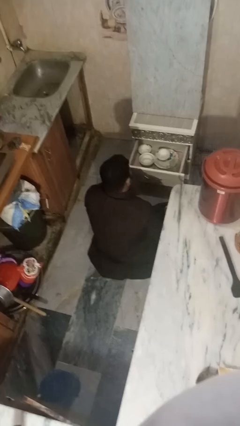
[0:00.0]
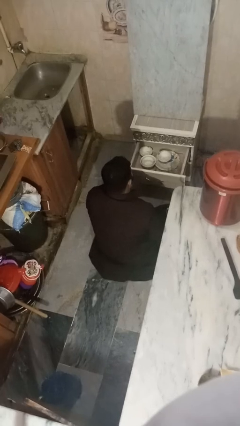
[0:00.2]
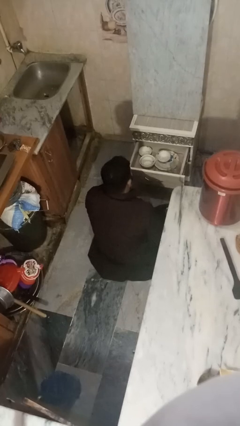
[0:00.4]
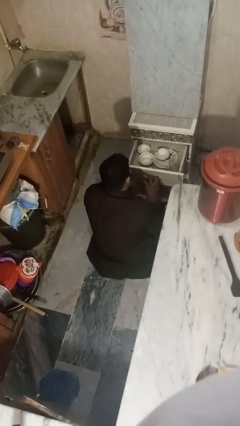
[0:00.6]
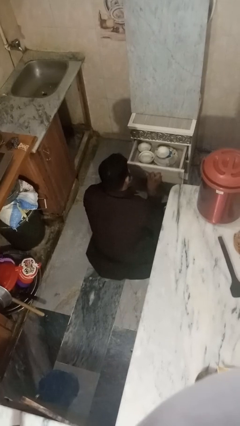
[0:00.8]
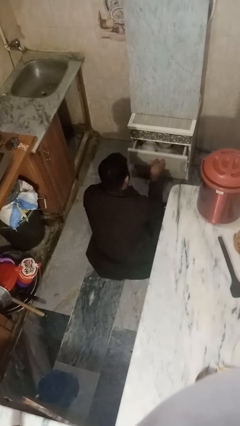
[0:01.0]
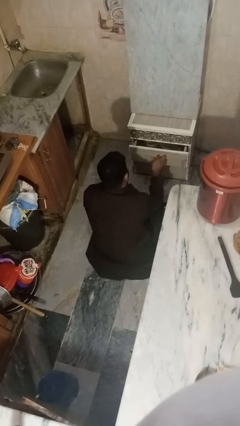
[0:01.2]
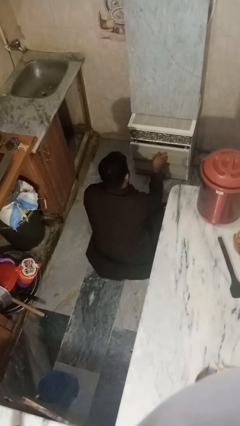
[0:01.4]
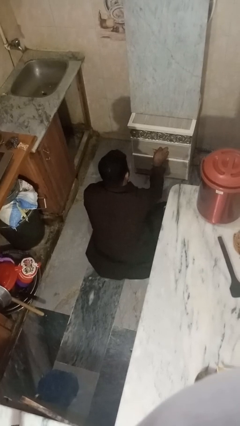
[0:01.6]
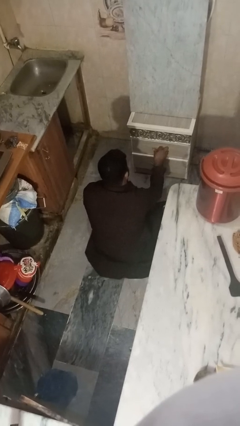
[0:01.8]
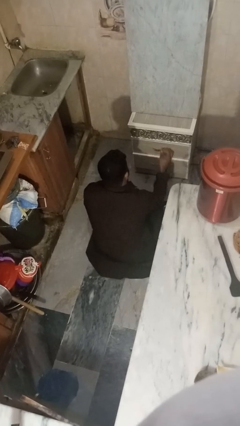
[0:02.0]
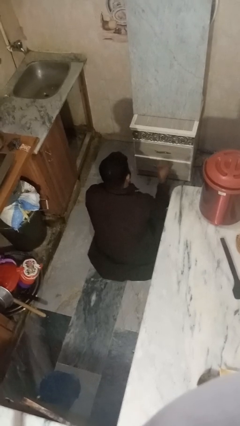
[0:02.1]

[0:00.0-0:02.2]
person closes kitchen drawer

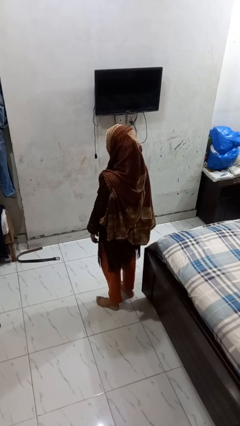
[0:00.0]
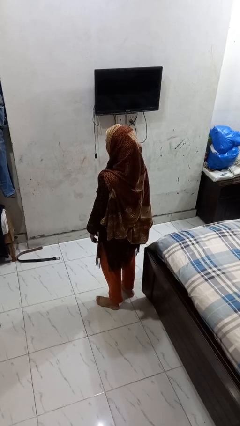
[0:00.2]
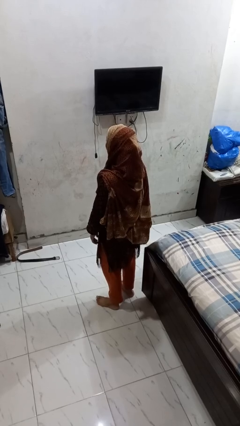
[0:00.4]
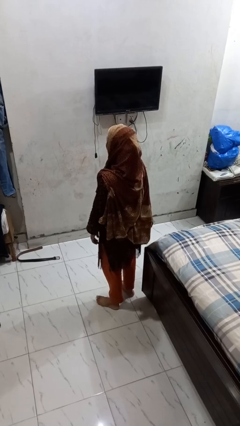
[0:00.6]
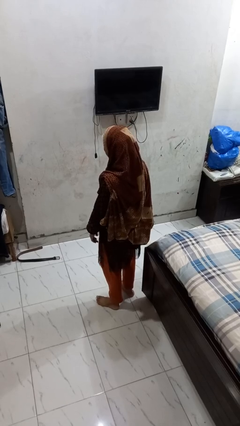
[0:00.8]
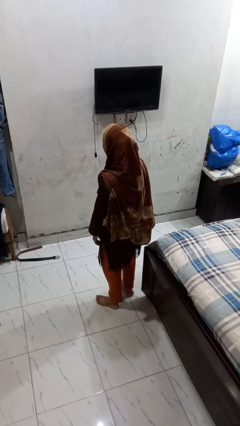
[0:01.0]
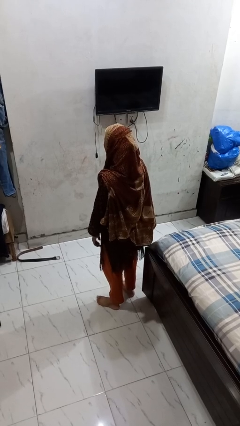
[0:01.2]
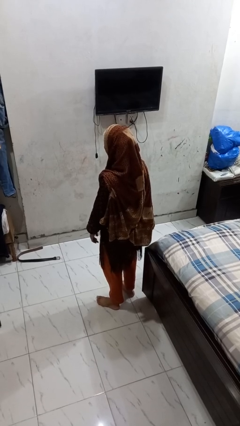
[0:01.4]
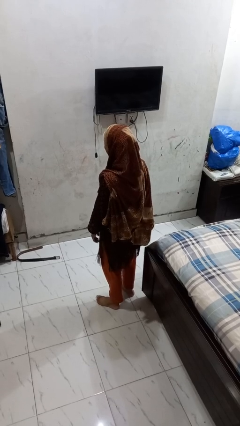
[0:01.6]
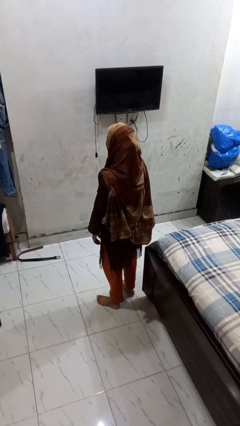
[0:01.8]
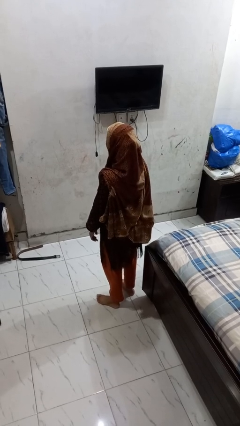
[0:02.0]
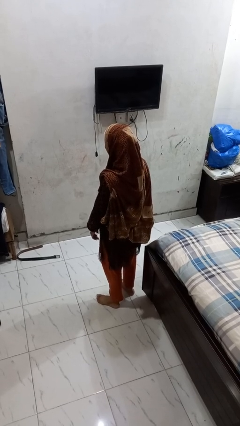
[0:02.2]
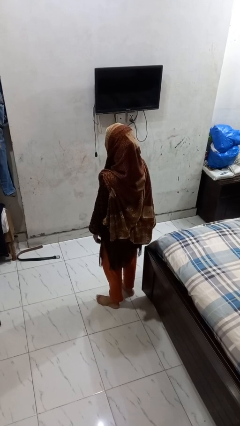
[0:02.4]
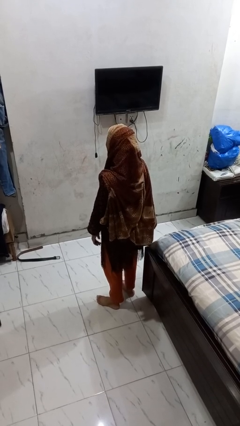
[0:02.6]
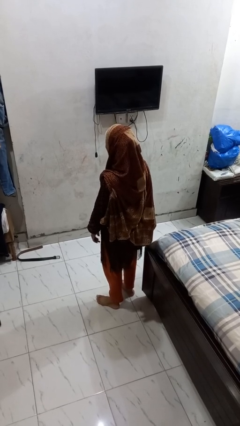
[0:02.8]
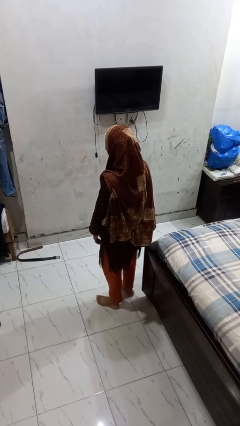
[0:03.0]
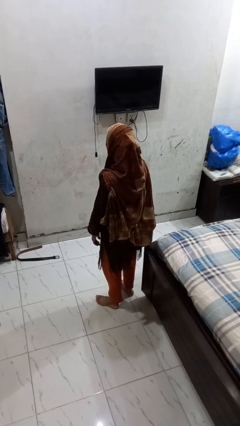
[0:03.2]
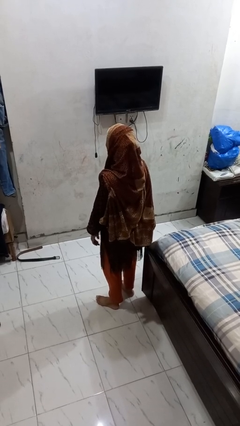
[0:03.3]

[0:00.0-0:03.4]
person nods head

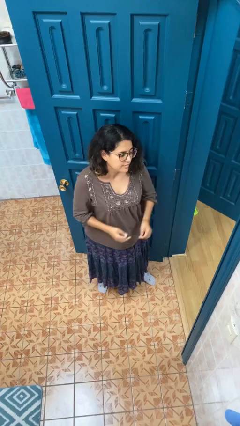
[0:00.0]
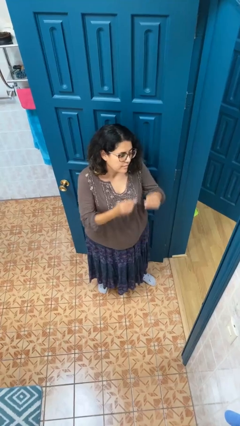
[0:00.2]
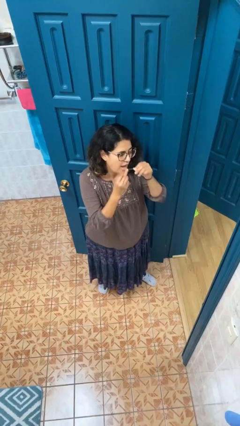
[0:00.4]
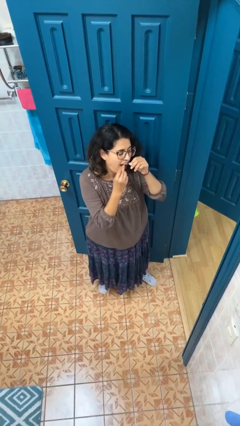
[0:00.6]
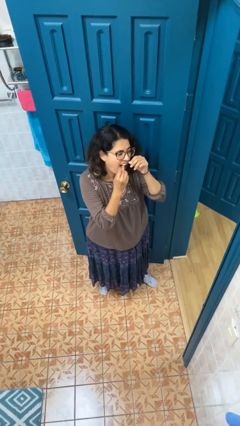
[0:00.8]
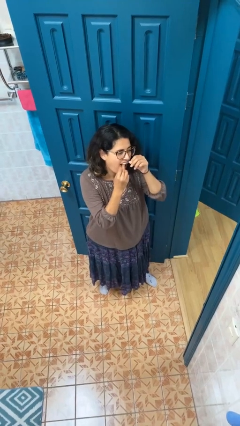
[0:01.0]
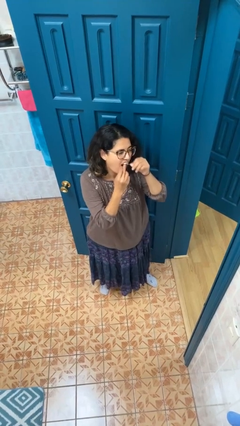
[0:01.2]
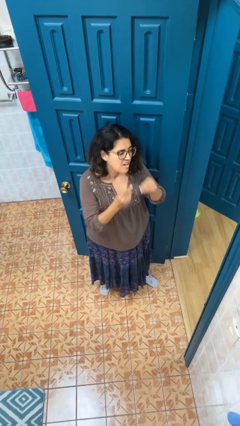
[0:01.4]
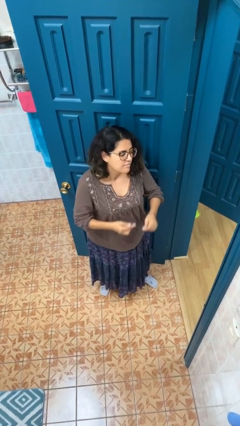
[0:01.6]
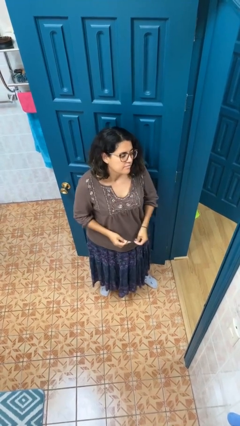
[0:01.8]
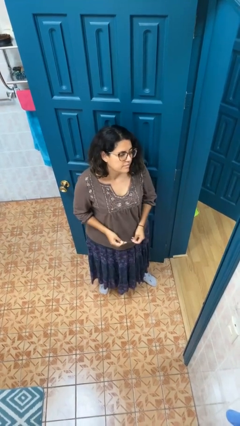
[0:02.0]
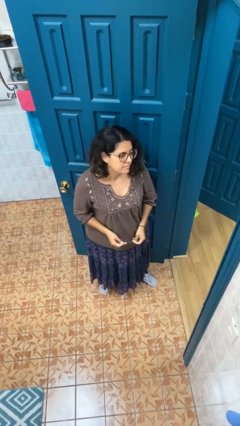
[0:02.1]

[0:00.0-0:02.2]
person flosses

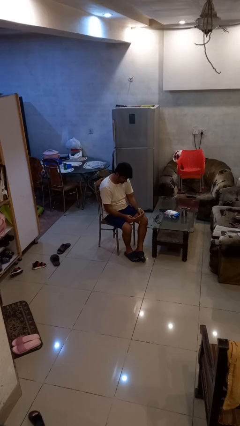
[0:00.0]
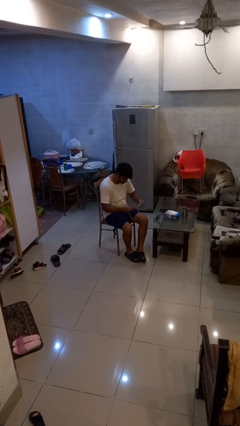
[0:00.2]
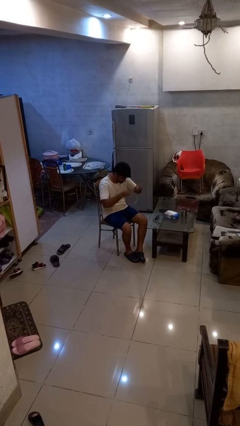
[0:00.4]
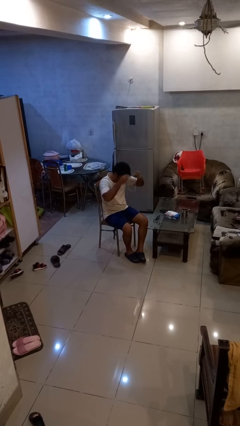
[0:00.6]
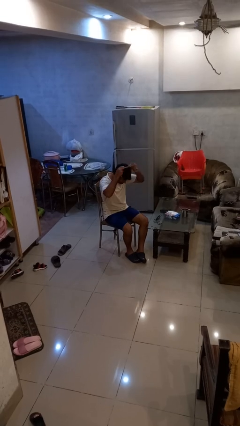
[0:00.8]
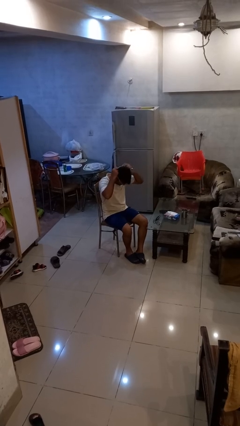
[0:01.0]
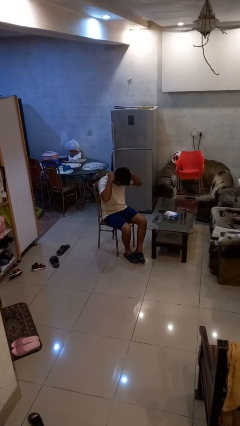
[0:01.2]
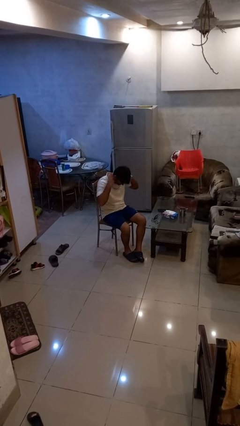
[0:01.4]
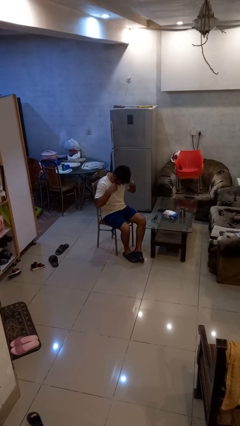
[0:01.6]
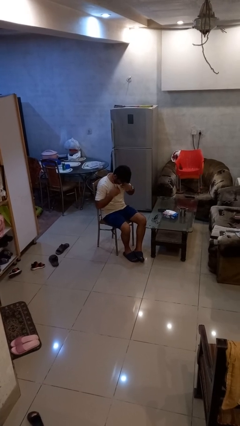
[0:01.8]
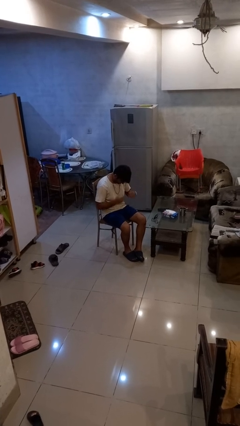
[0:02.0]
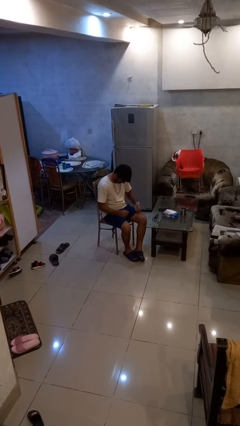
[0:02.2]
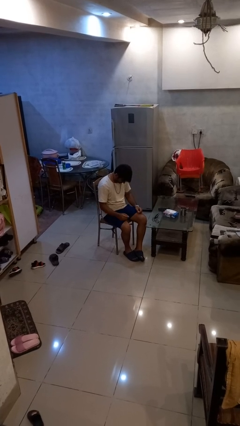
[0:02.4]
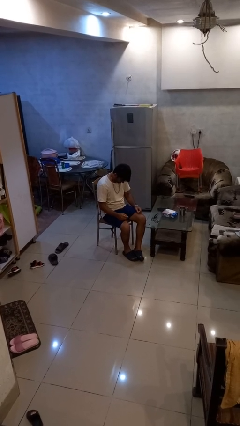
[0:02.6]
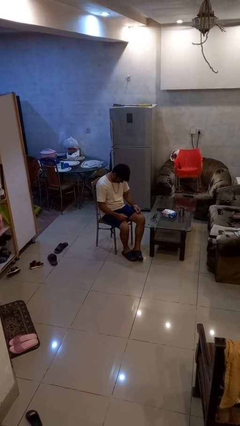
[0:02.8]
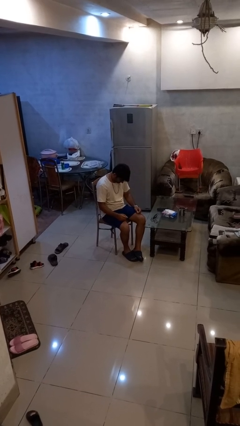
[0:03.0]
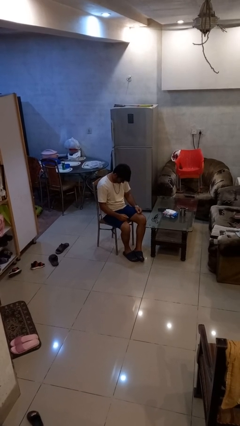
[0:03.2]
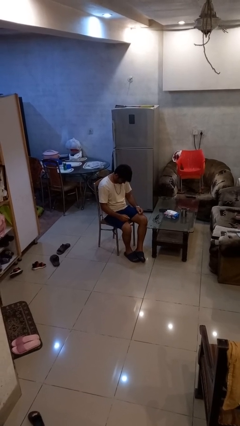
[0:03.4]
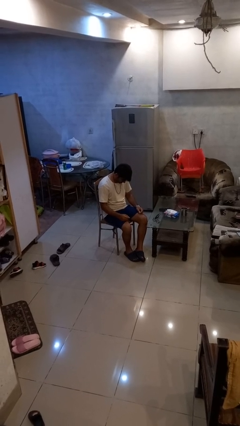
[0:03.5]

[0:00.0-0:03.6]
person puts on necklace

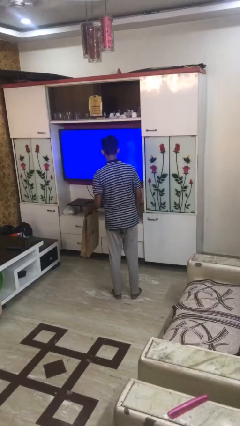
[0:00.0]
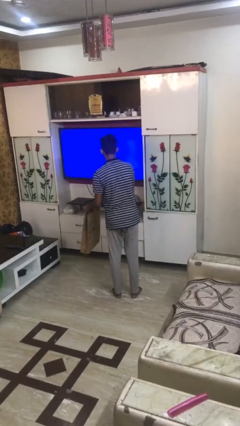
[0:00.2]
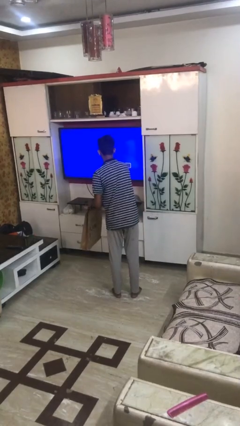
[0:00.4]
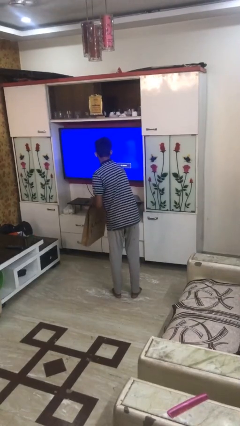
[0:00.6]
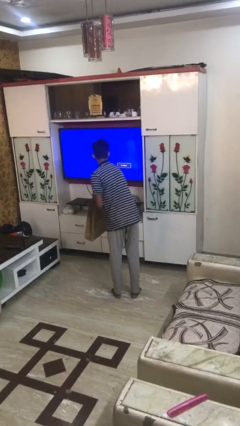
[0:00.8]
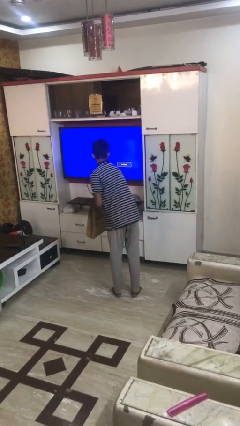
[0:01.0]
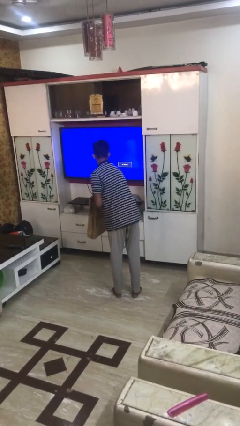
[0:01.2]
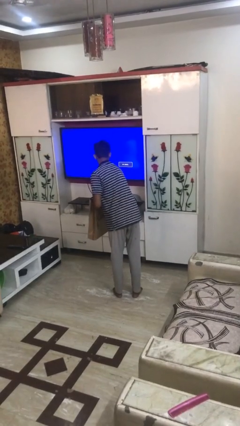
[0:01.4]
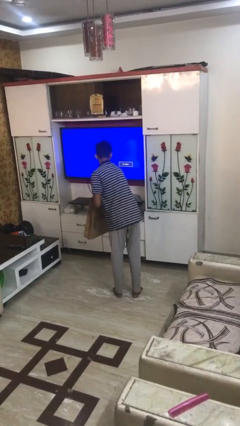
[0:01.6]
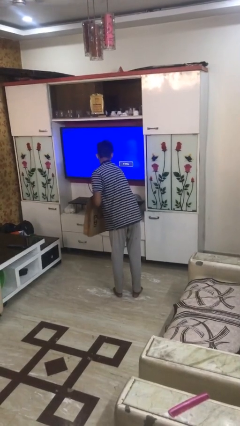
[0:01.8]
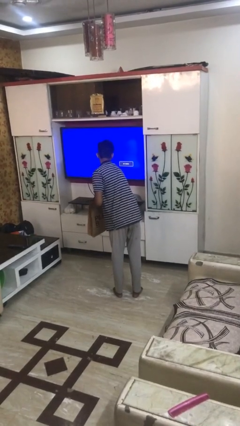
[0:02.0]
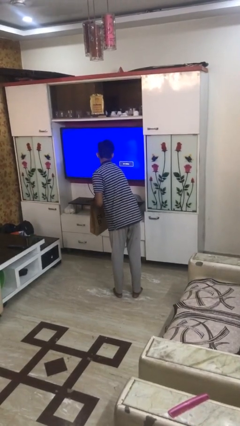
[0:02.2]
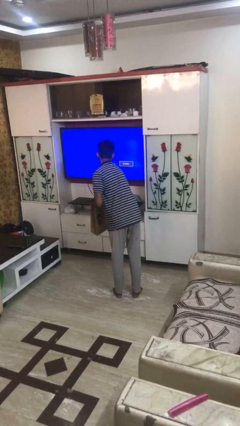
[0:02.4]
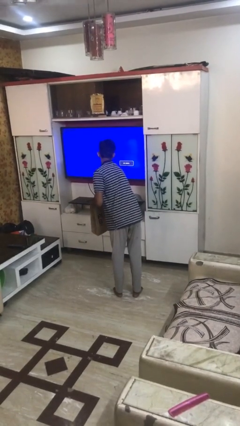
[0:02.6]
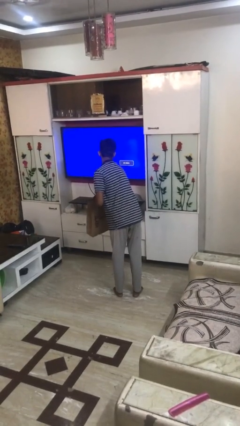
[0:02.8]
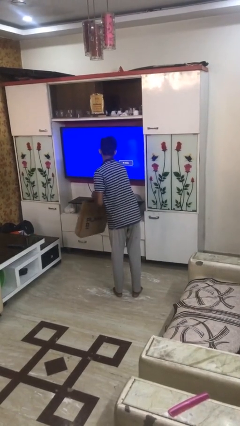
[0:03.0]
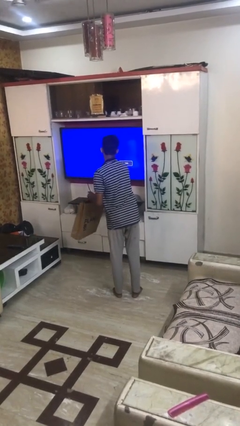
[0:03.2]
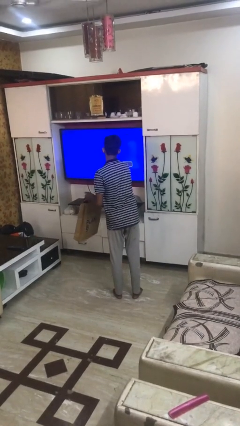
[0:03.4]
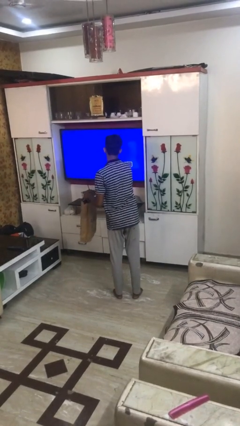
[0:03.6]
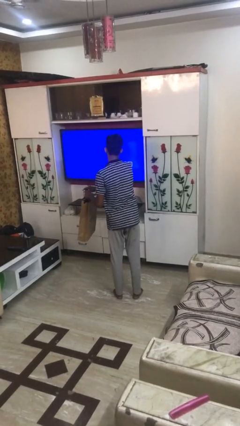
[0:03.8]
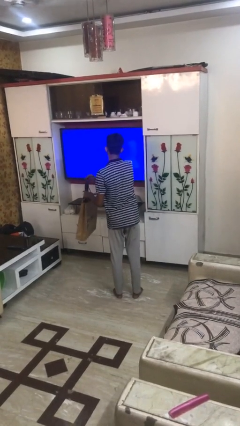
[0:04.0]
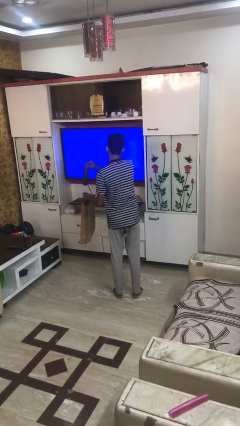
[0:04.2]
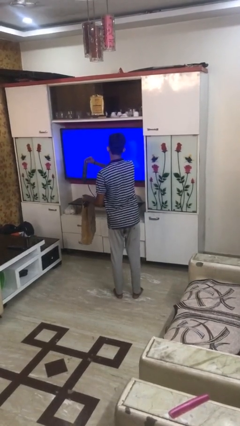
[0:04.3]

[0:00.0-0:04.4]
person takes object from bag

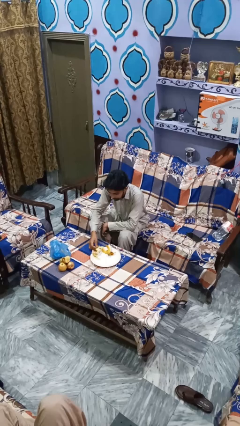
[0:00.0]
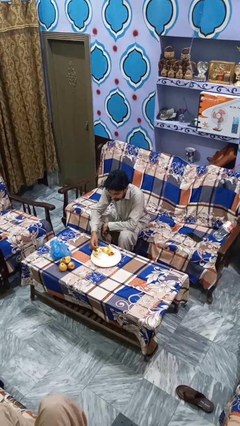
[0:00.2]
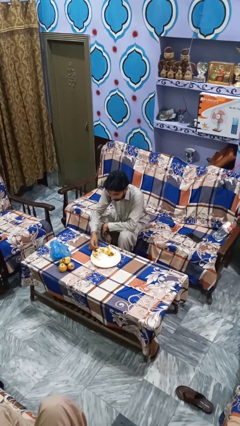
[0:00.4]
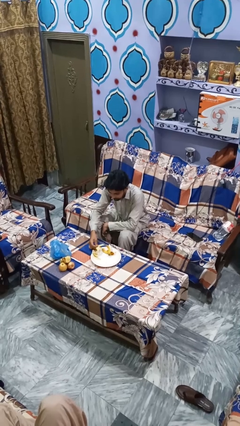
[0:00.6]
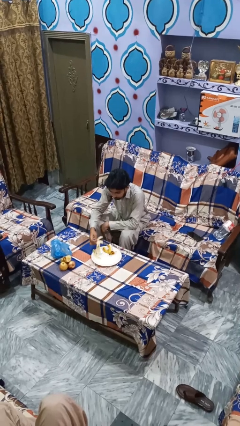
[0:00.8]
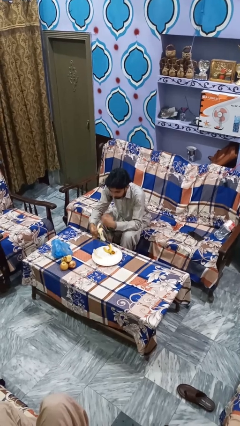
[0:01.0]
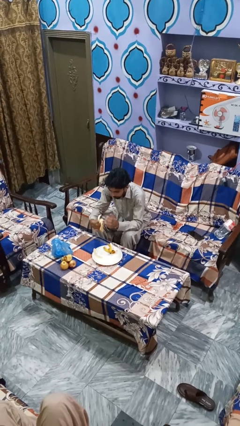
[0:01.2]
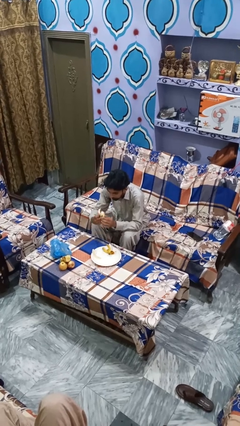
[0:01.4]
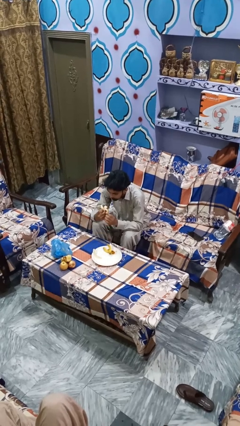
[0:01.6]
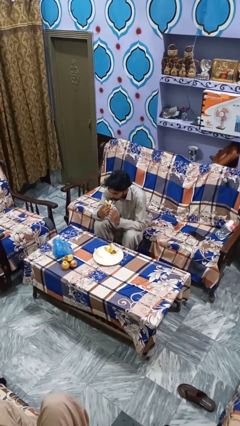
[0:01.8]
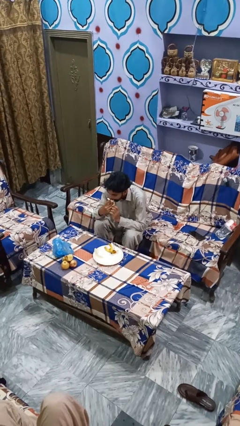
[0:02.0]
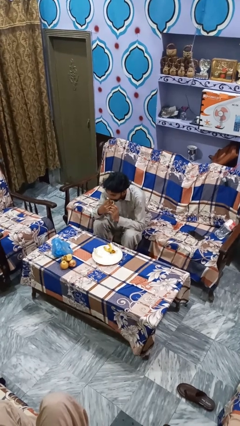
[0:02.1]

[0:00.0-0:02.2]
person eats banana
